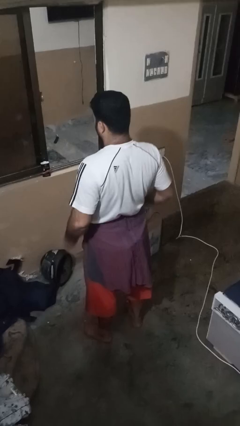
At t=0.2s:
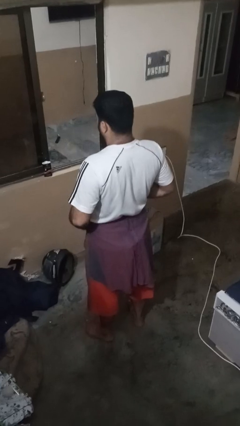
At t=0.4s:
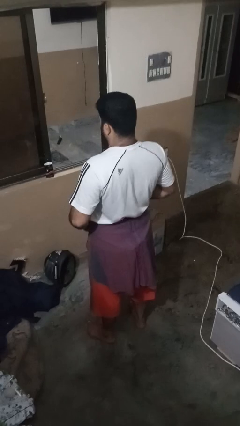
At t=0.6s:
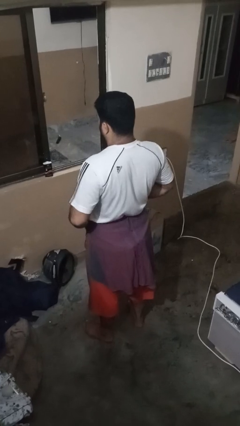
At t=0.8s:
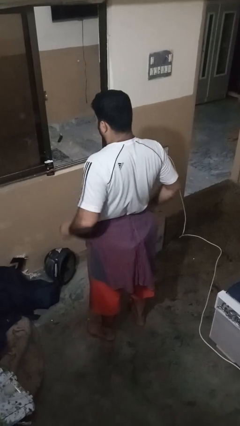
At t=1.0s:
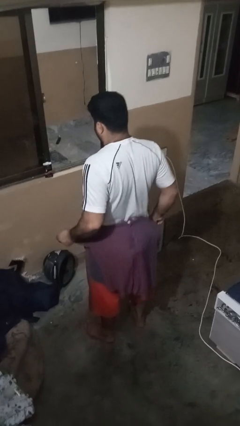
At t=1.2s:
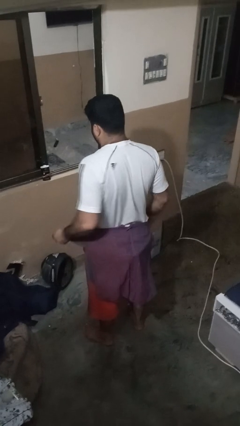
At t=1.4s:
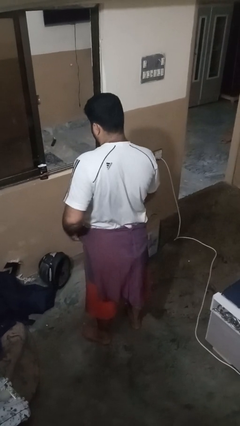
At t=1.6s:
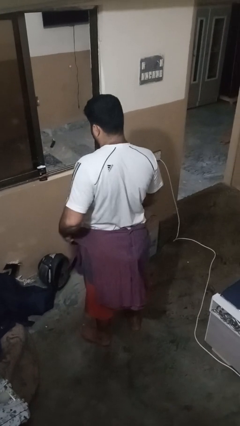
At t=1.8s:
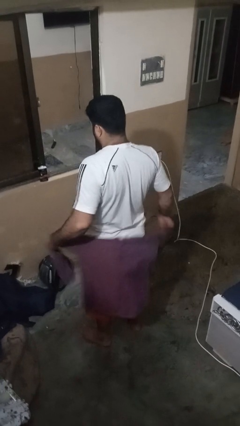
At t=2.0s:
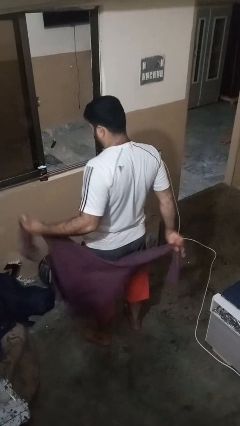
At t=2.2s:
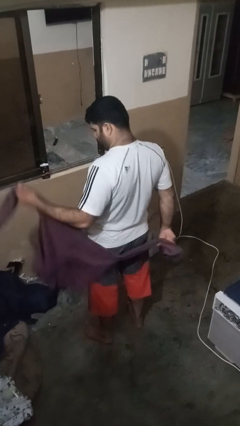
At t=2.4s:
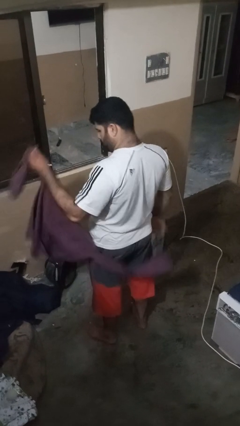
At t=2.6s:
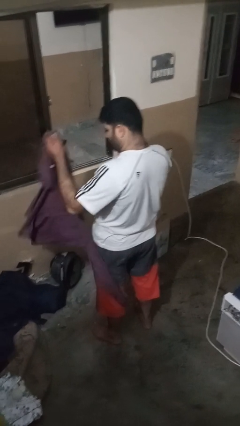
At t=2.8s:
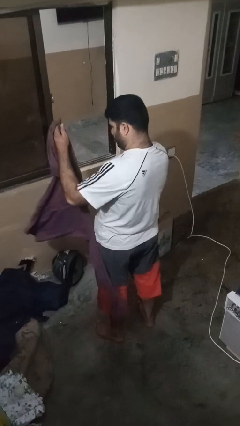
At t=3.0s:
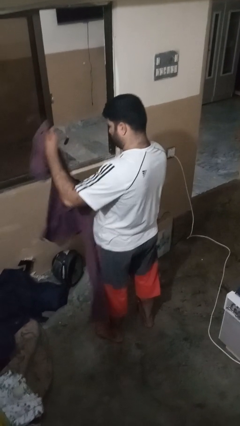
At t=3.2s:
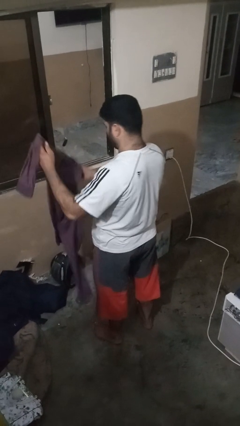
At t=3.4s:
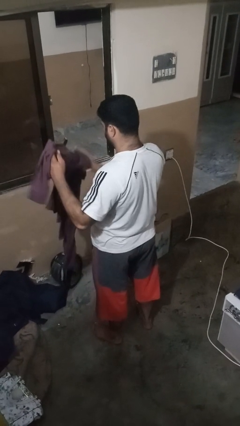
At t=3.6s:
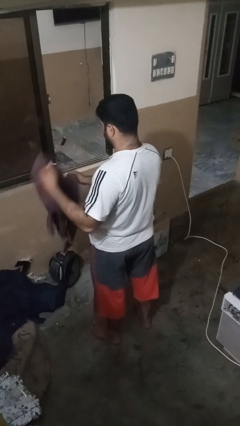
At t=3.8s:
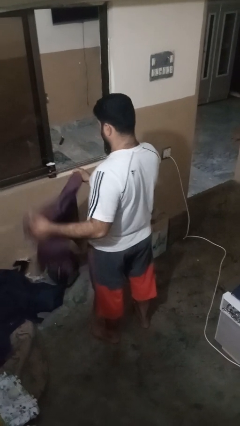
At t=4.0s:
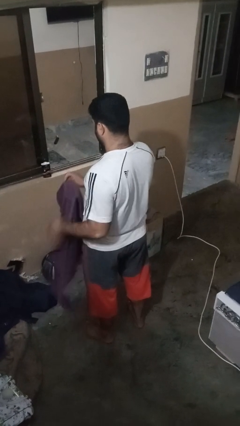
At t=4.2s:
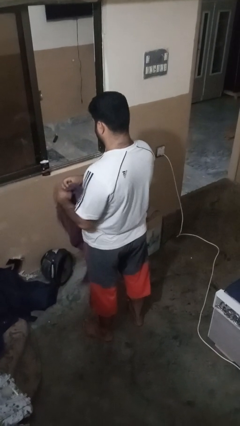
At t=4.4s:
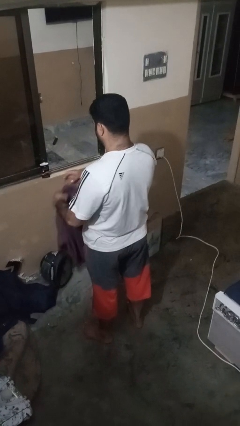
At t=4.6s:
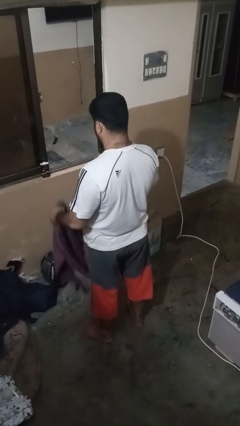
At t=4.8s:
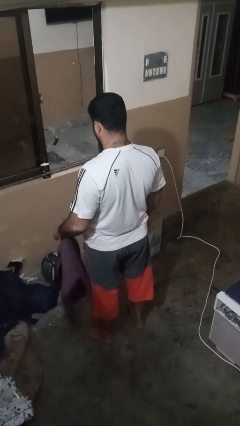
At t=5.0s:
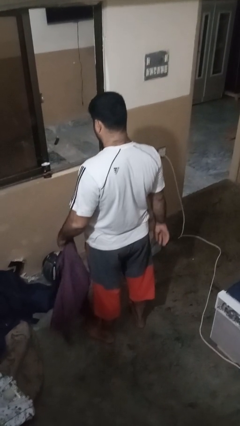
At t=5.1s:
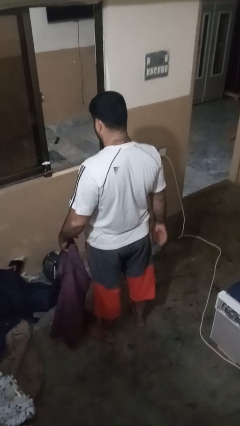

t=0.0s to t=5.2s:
person unties jacket around waist

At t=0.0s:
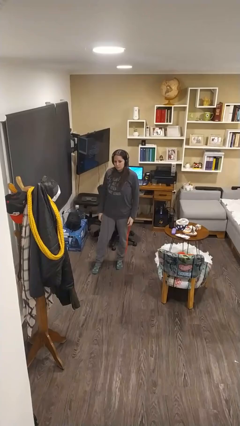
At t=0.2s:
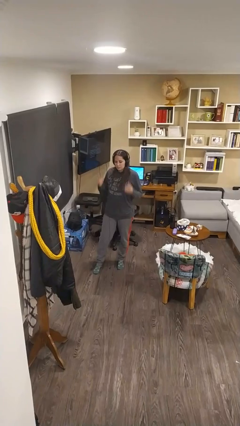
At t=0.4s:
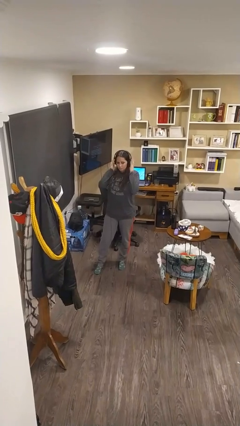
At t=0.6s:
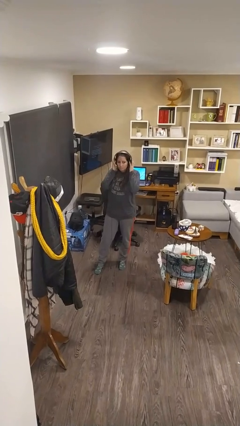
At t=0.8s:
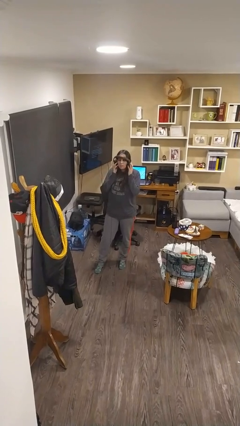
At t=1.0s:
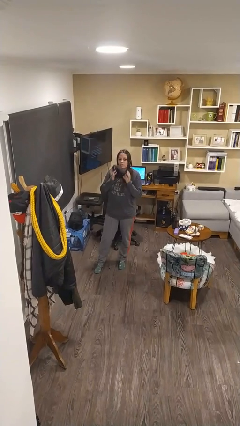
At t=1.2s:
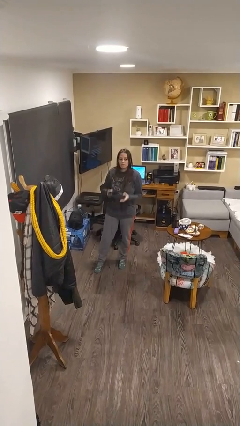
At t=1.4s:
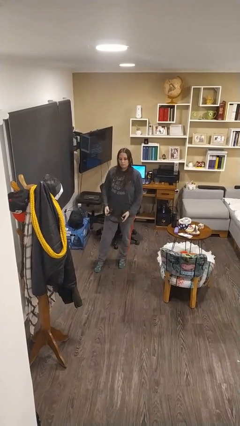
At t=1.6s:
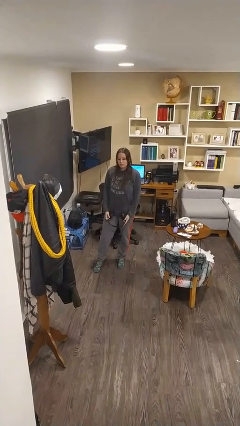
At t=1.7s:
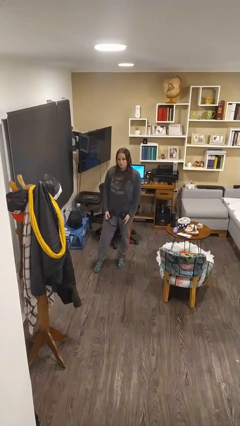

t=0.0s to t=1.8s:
person takes off headphones

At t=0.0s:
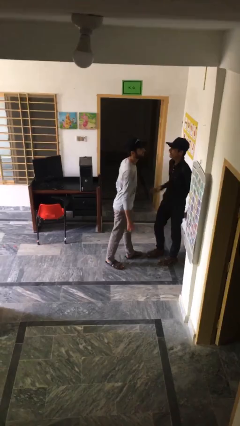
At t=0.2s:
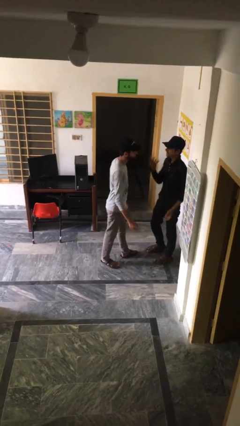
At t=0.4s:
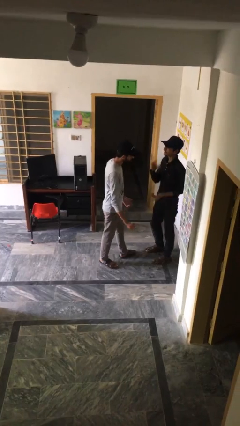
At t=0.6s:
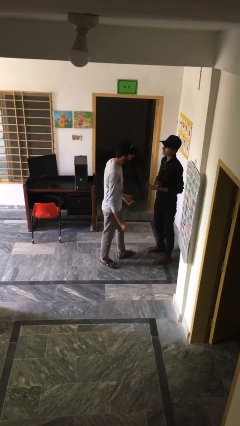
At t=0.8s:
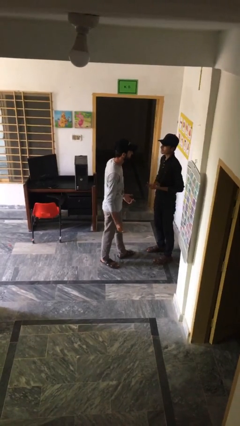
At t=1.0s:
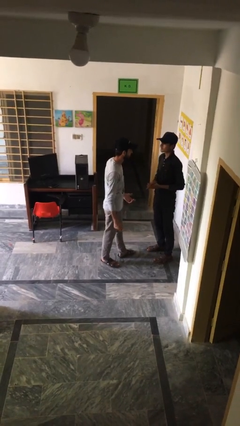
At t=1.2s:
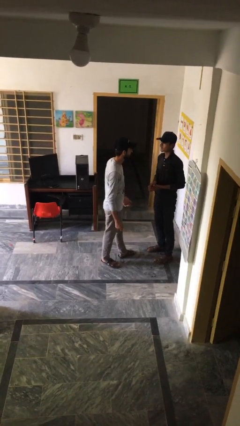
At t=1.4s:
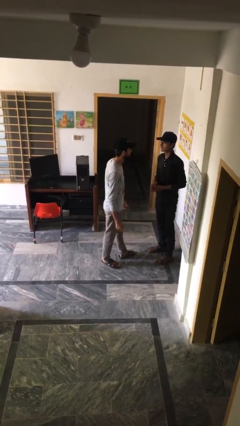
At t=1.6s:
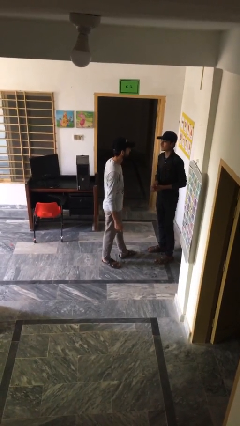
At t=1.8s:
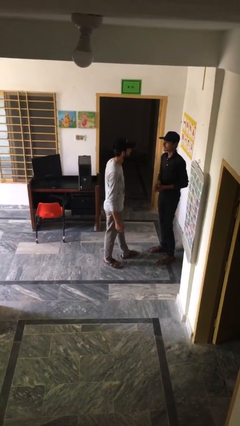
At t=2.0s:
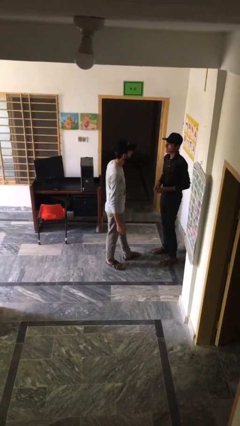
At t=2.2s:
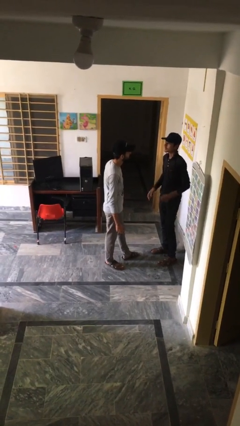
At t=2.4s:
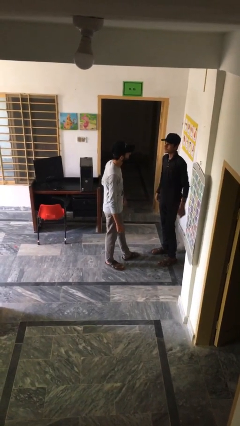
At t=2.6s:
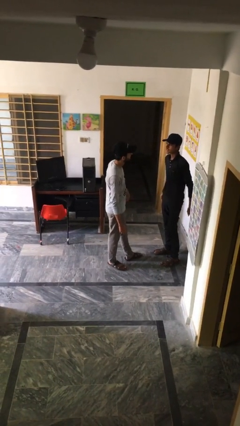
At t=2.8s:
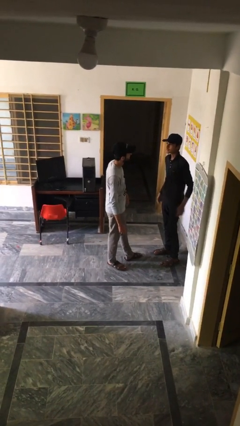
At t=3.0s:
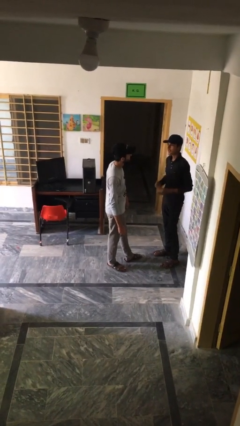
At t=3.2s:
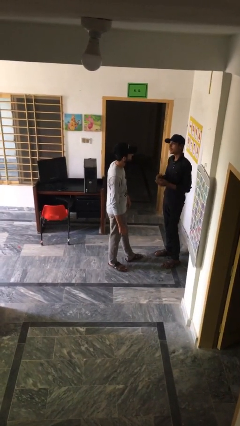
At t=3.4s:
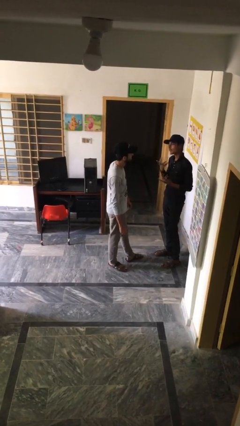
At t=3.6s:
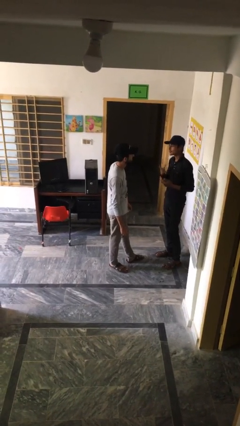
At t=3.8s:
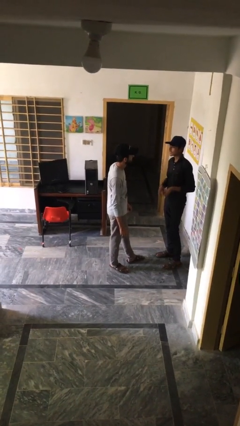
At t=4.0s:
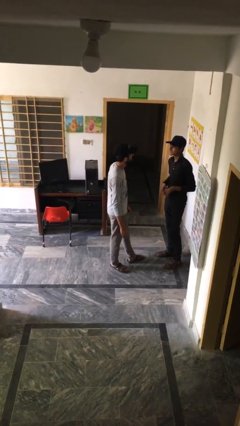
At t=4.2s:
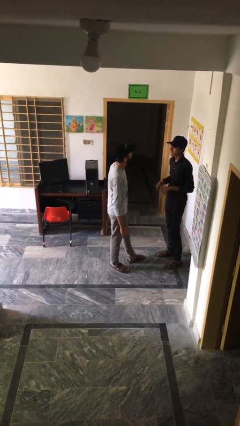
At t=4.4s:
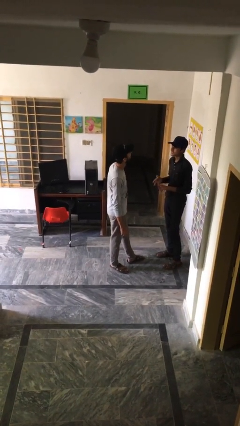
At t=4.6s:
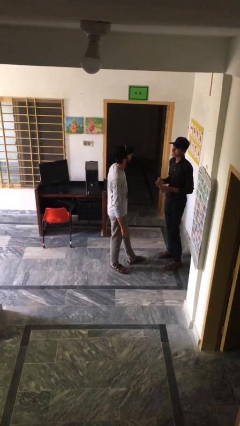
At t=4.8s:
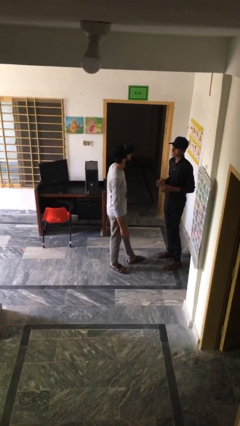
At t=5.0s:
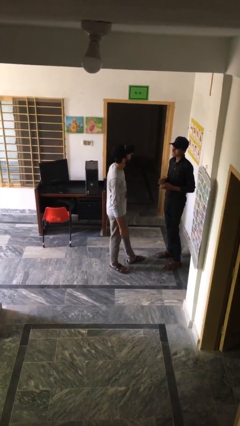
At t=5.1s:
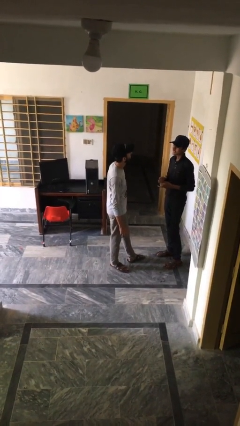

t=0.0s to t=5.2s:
person talks to person

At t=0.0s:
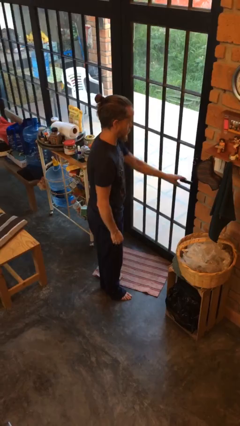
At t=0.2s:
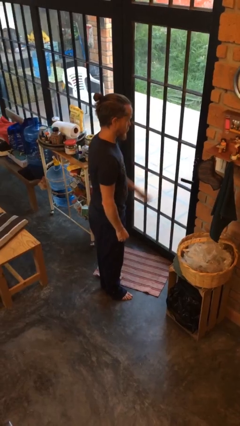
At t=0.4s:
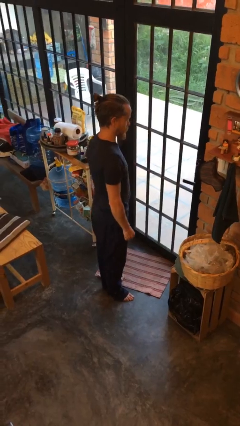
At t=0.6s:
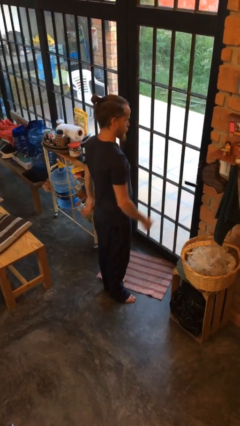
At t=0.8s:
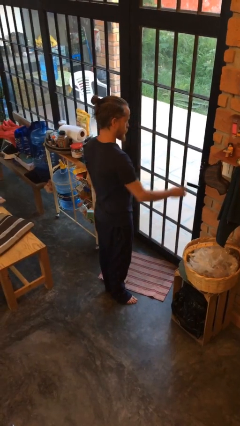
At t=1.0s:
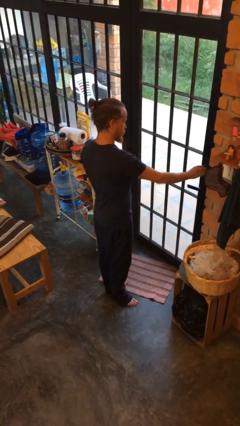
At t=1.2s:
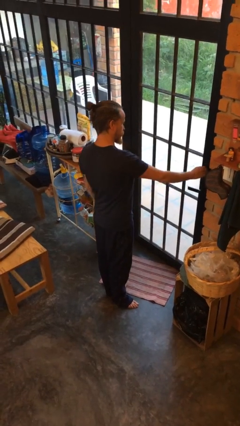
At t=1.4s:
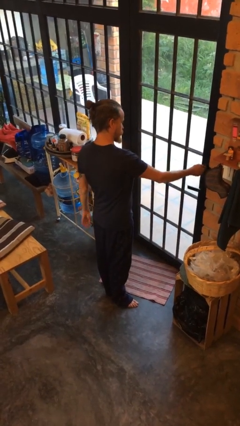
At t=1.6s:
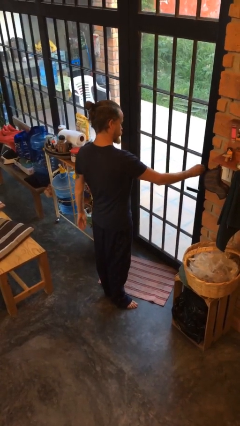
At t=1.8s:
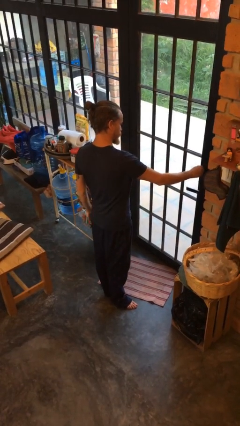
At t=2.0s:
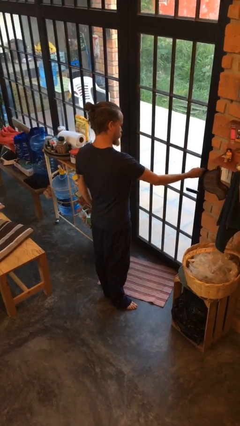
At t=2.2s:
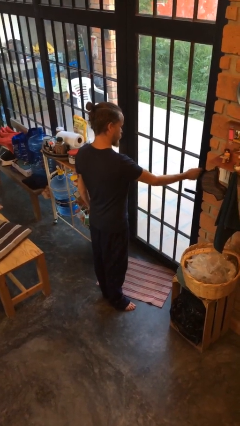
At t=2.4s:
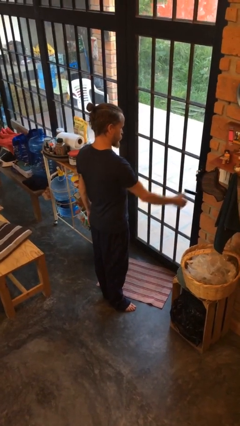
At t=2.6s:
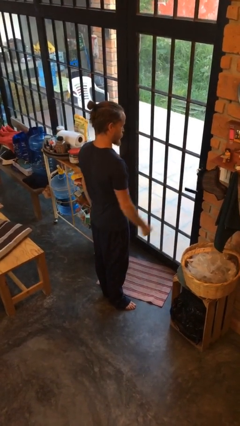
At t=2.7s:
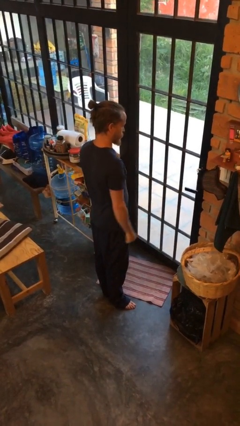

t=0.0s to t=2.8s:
person locks door with keys

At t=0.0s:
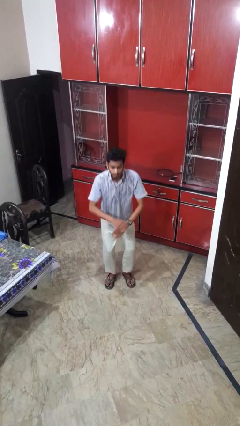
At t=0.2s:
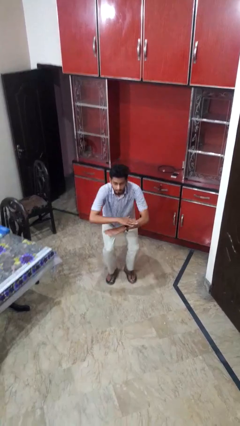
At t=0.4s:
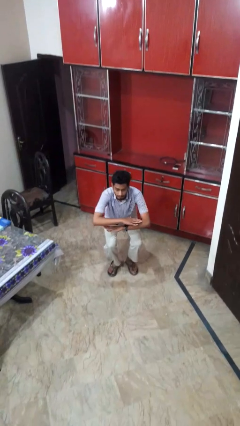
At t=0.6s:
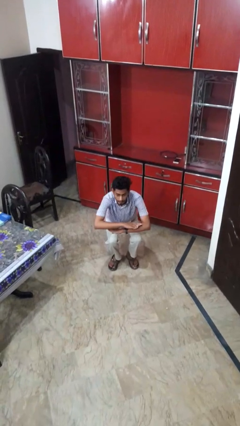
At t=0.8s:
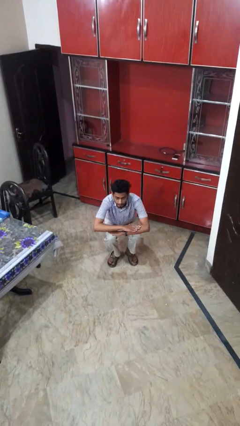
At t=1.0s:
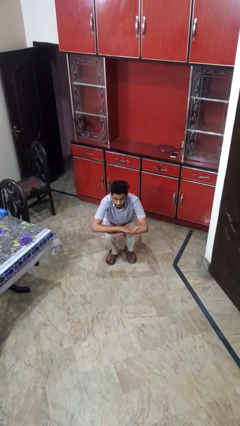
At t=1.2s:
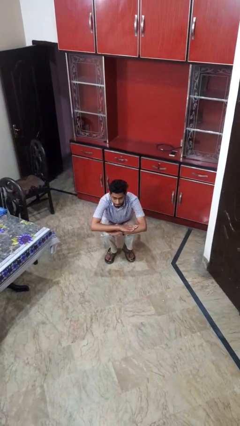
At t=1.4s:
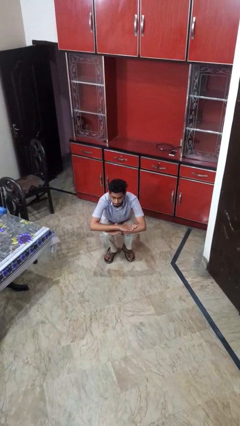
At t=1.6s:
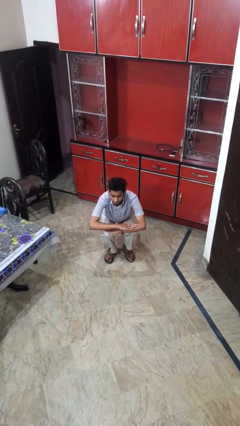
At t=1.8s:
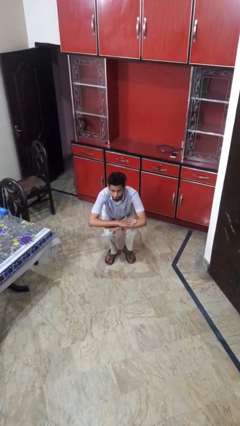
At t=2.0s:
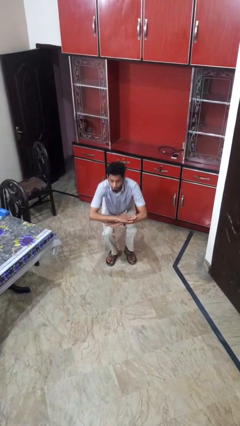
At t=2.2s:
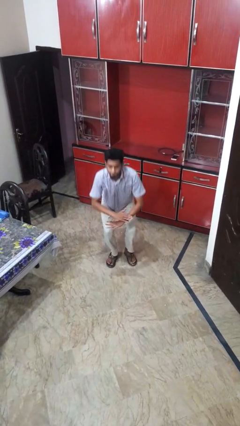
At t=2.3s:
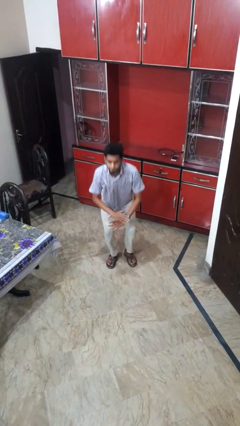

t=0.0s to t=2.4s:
person squats
